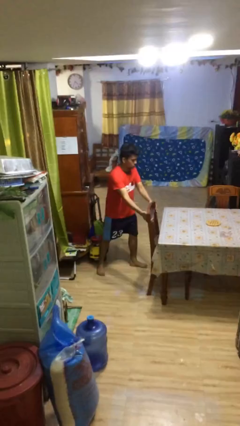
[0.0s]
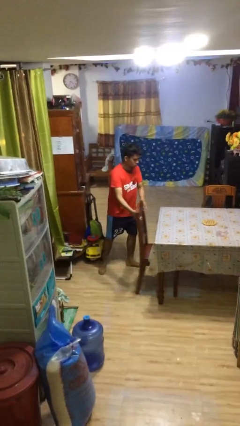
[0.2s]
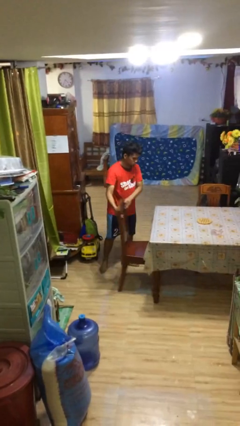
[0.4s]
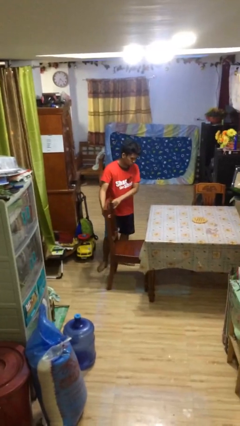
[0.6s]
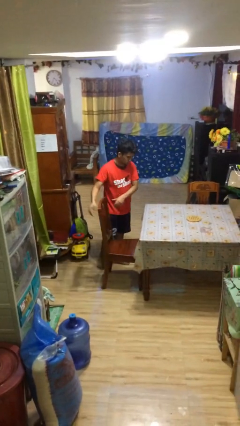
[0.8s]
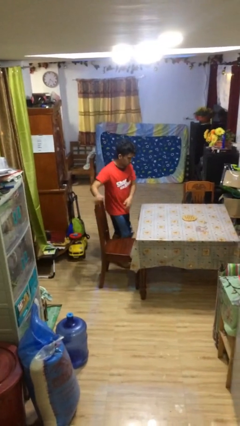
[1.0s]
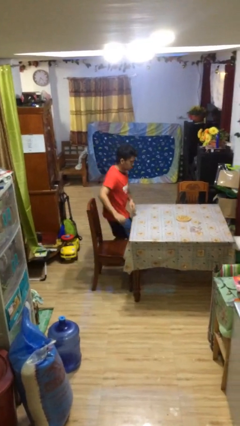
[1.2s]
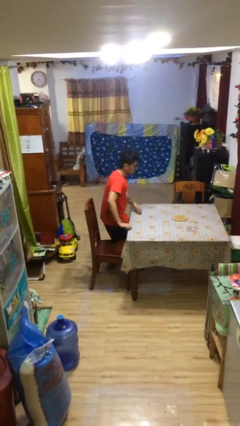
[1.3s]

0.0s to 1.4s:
person stands up

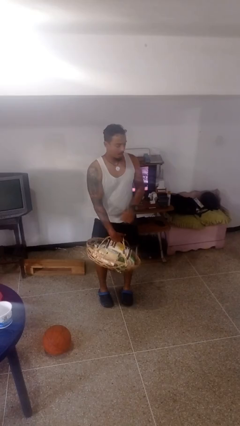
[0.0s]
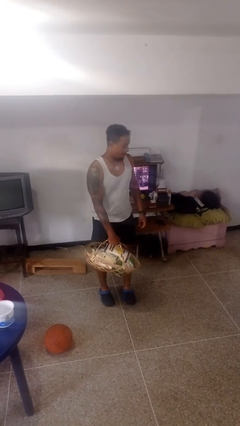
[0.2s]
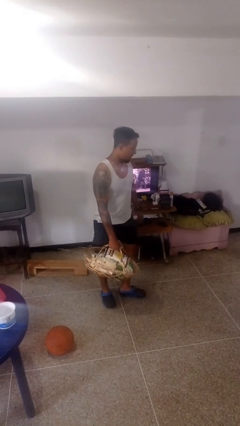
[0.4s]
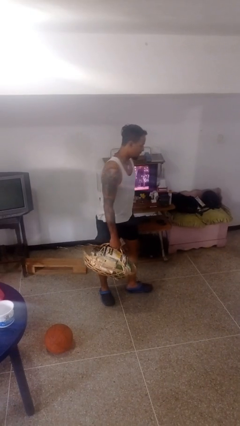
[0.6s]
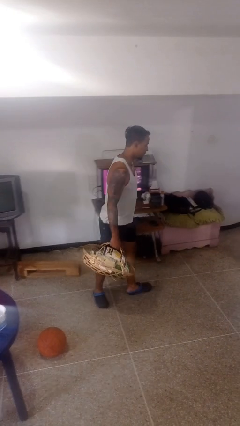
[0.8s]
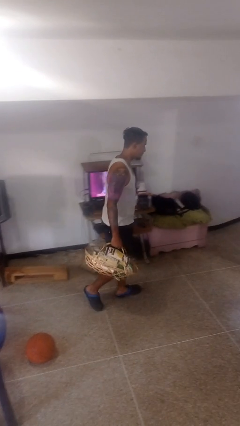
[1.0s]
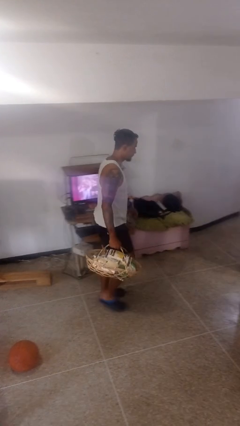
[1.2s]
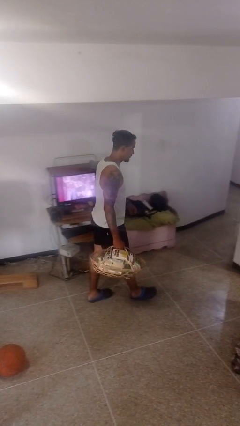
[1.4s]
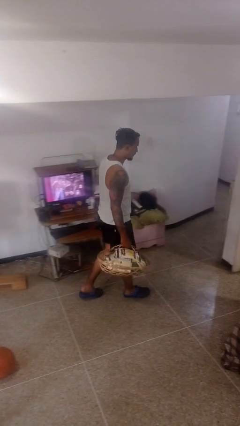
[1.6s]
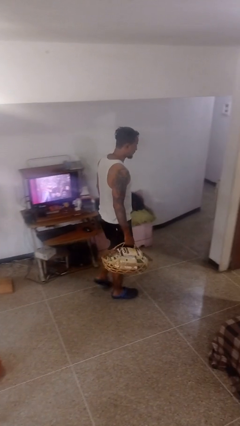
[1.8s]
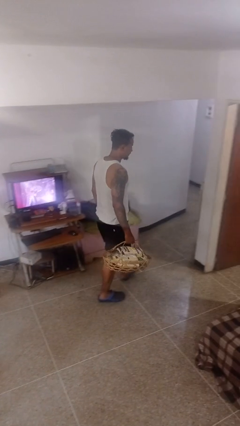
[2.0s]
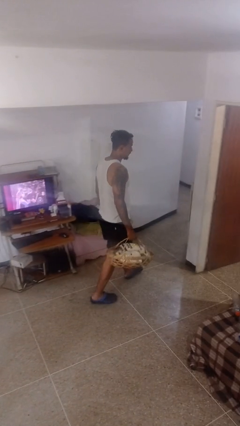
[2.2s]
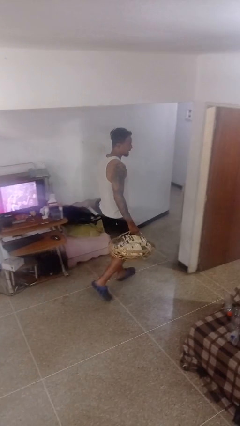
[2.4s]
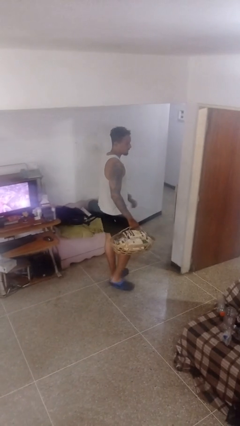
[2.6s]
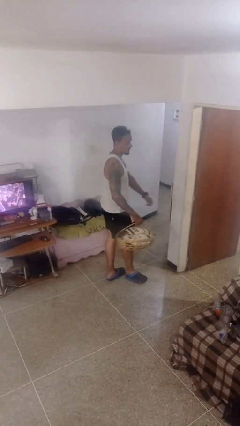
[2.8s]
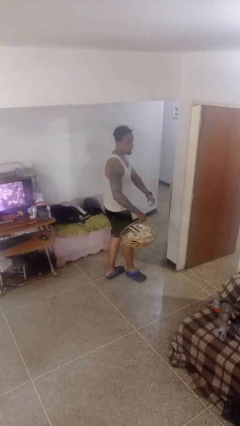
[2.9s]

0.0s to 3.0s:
person carries groceries

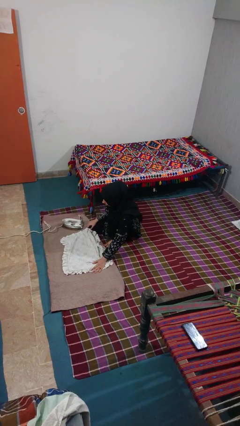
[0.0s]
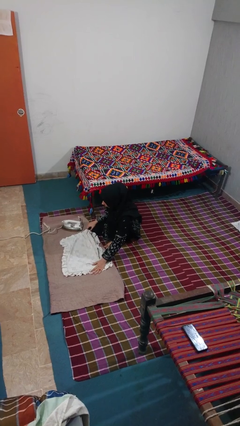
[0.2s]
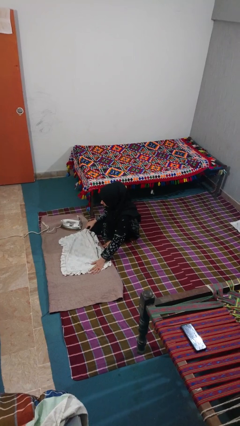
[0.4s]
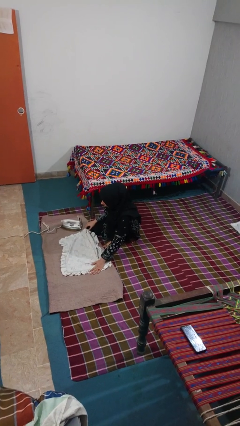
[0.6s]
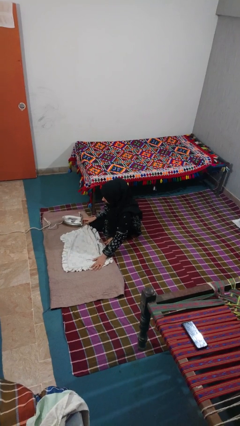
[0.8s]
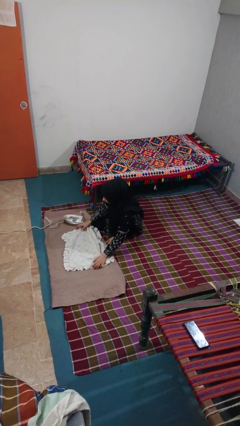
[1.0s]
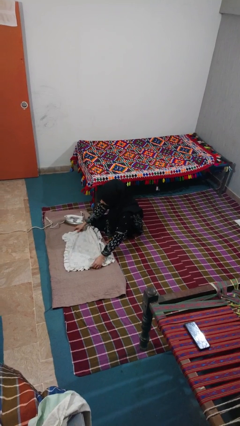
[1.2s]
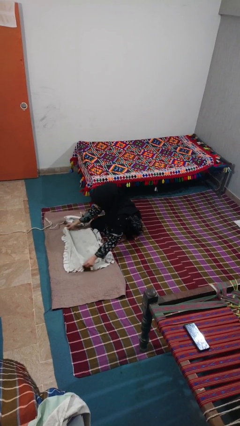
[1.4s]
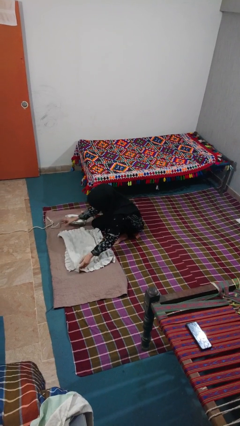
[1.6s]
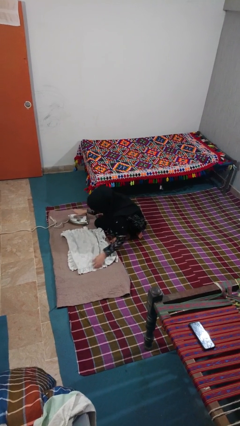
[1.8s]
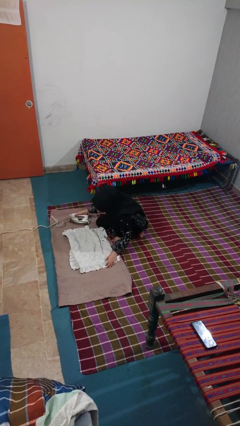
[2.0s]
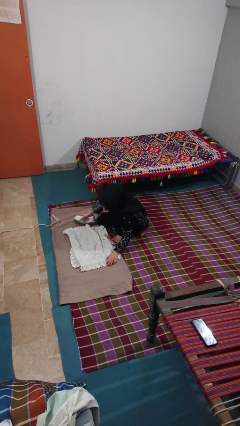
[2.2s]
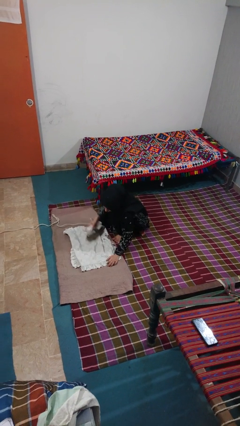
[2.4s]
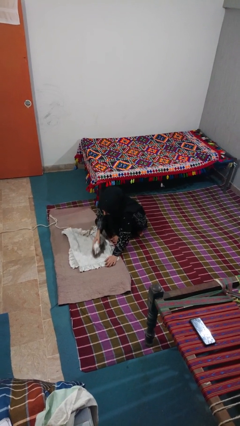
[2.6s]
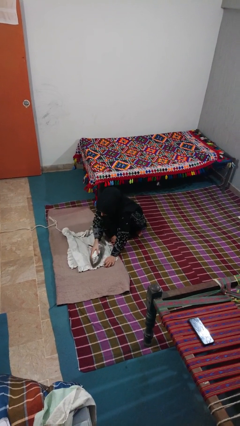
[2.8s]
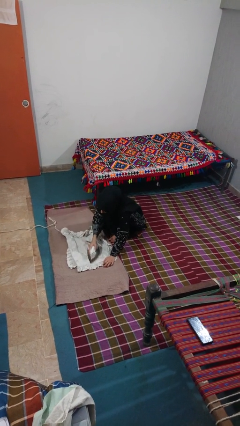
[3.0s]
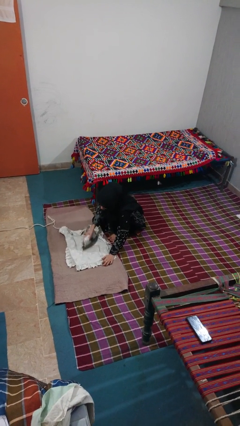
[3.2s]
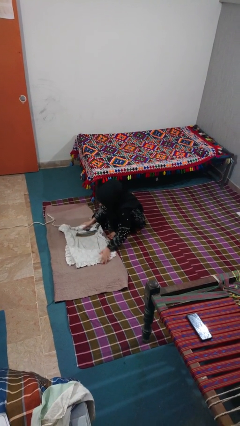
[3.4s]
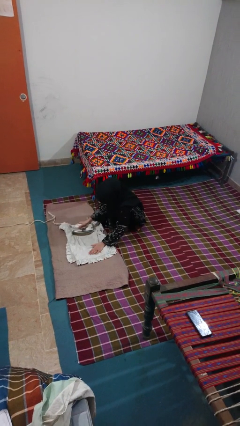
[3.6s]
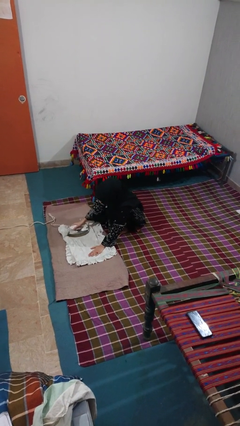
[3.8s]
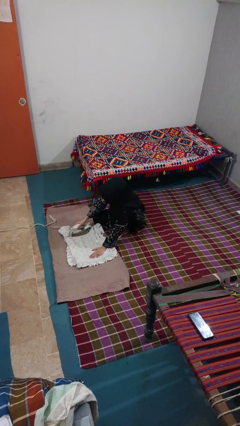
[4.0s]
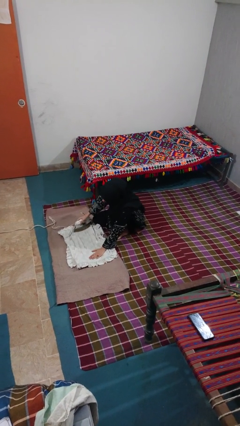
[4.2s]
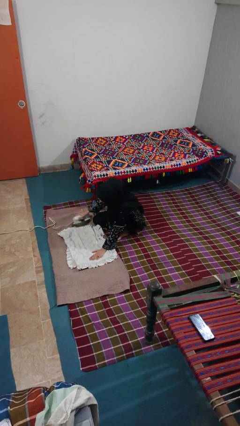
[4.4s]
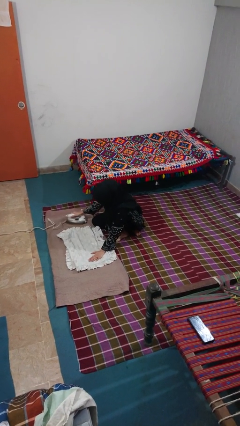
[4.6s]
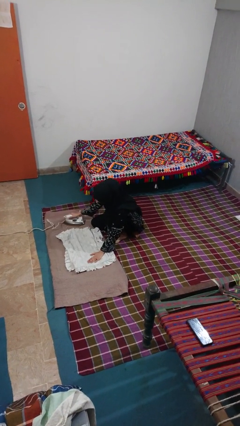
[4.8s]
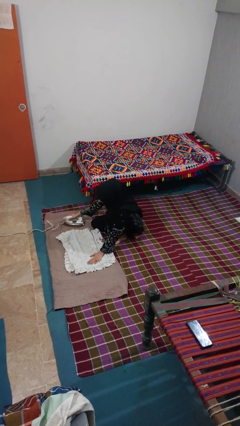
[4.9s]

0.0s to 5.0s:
person irons clothes

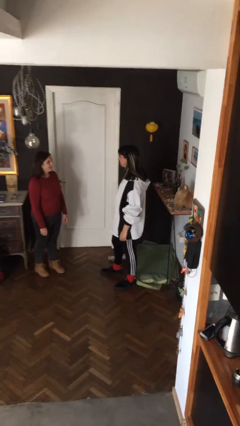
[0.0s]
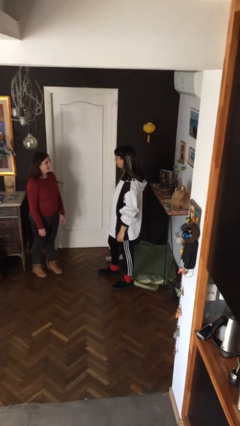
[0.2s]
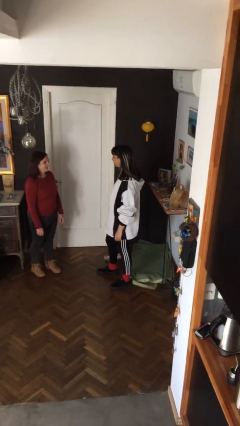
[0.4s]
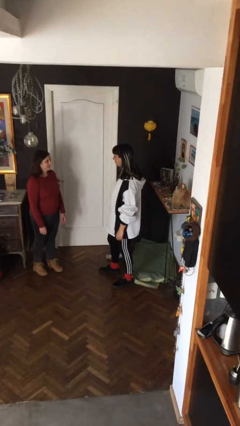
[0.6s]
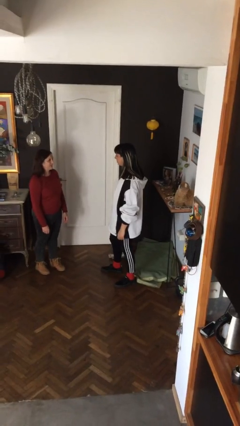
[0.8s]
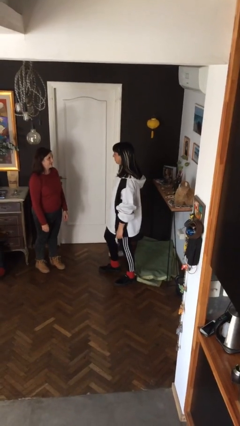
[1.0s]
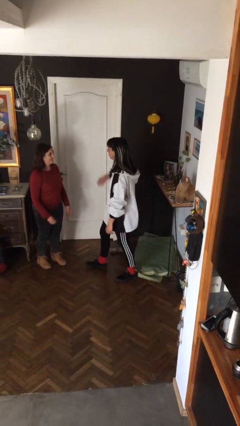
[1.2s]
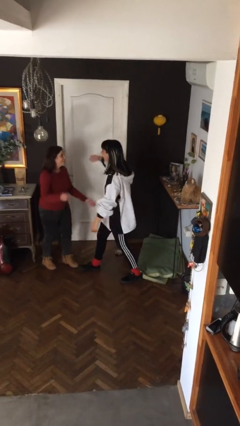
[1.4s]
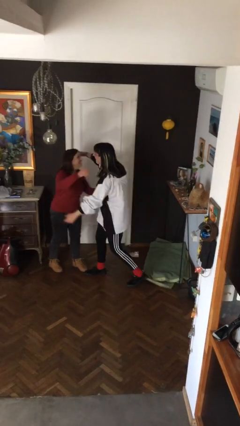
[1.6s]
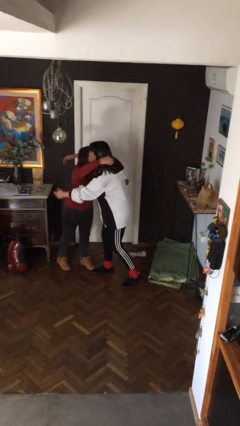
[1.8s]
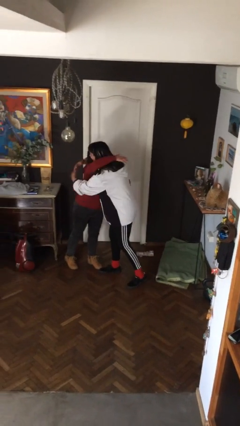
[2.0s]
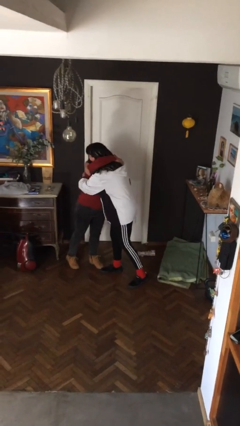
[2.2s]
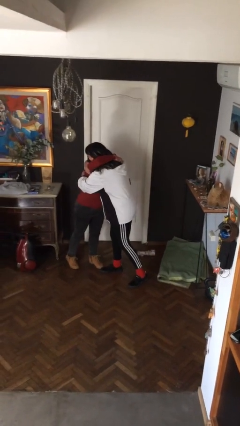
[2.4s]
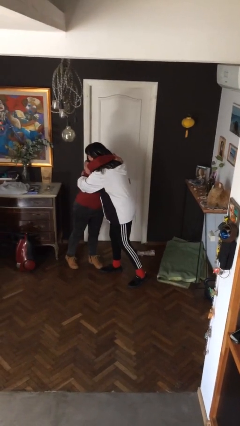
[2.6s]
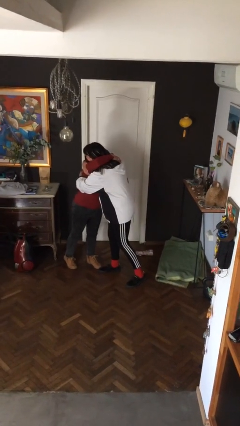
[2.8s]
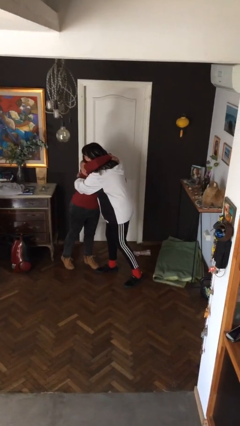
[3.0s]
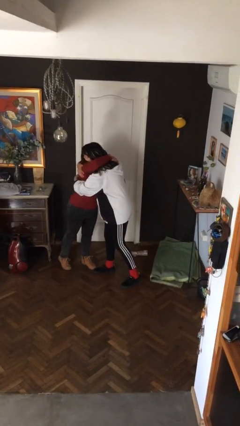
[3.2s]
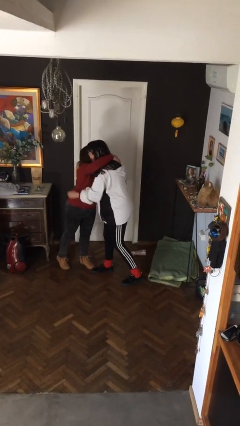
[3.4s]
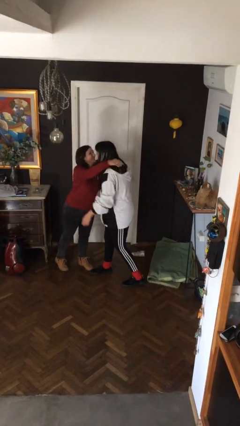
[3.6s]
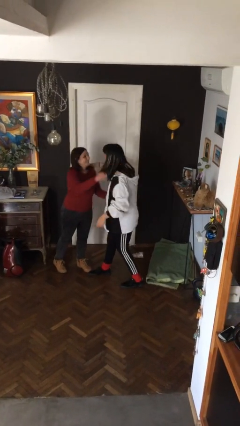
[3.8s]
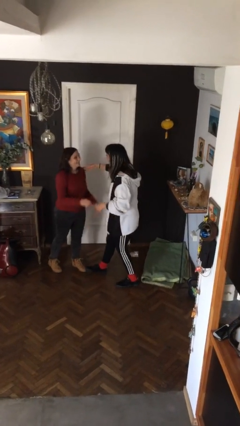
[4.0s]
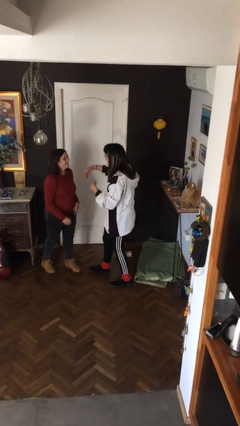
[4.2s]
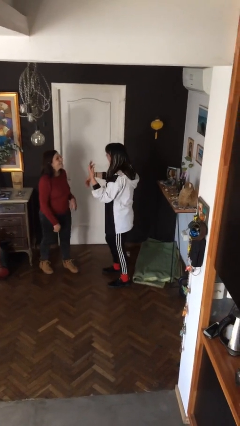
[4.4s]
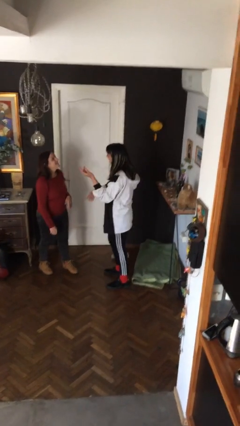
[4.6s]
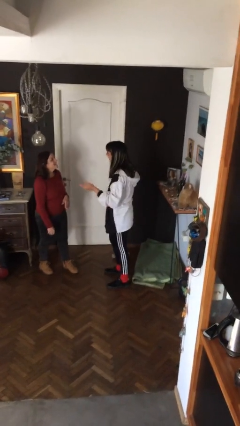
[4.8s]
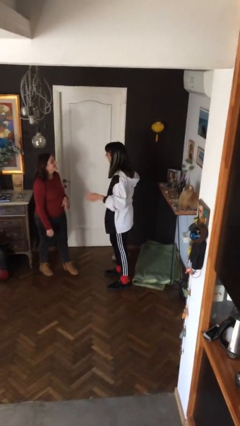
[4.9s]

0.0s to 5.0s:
person embraces person

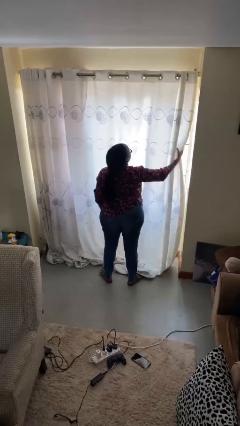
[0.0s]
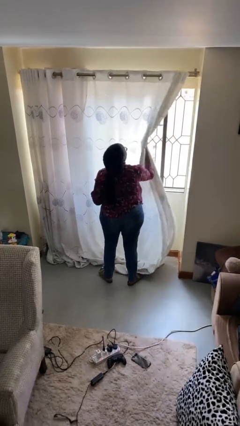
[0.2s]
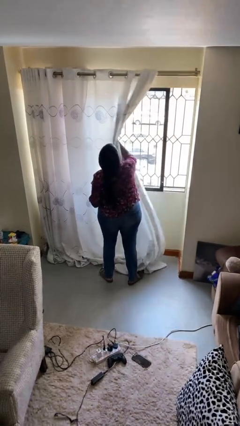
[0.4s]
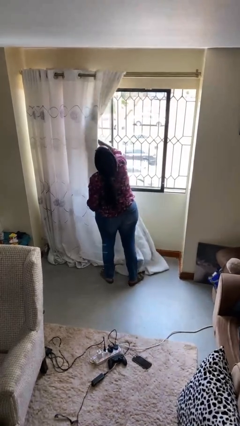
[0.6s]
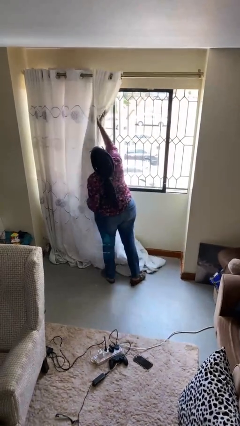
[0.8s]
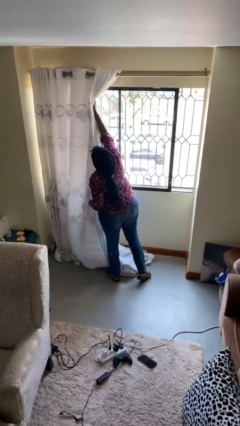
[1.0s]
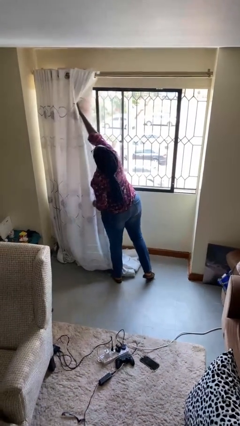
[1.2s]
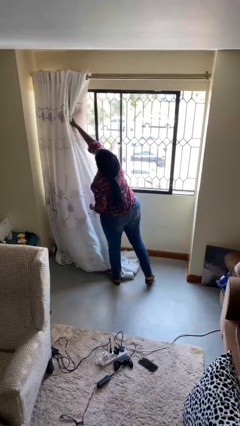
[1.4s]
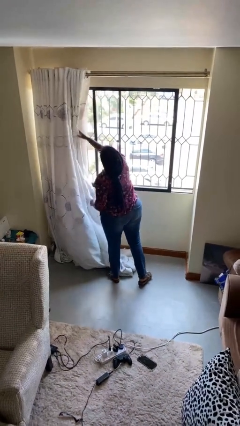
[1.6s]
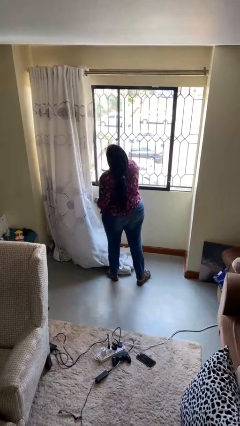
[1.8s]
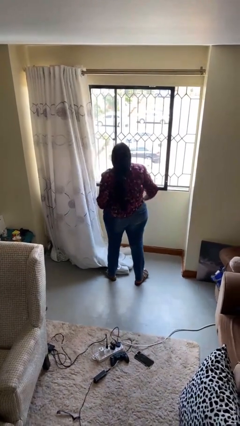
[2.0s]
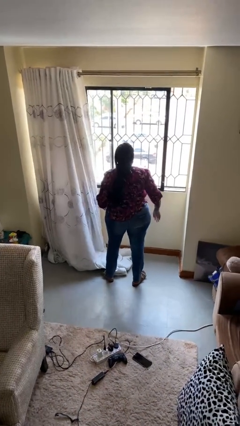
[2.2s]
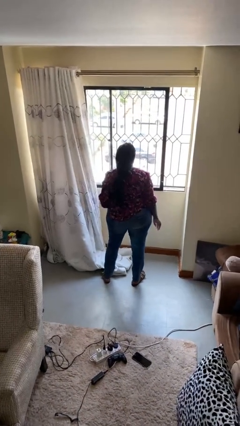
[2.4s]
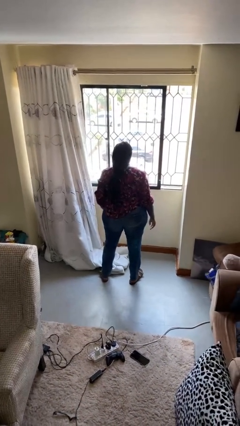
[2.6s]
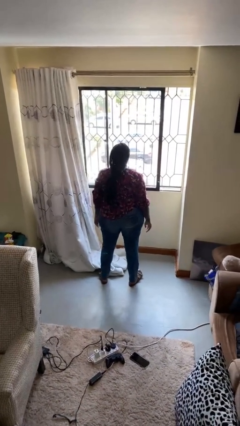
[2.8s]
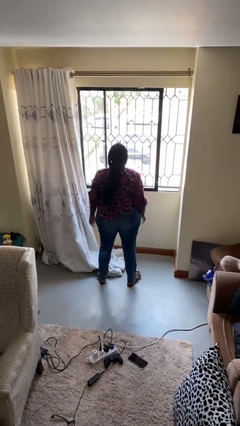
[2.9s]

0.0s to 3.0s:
person opens curtains
